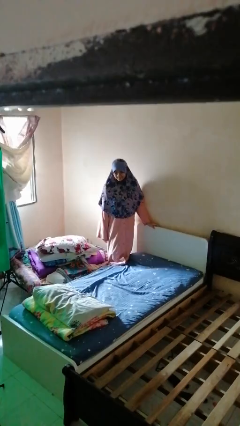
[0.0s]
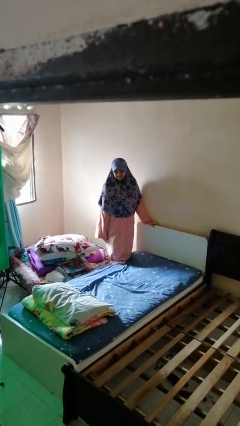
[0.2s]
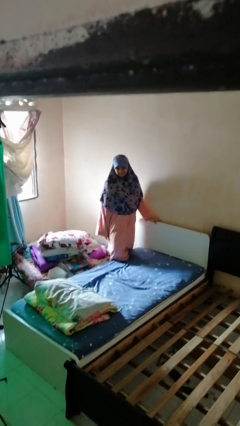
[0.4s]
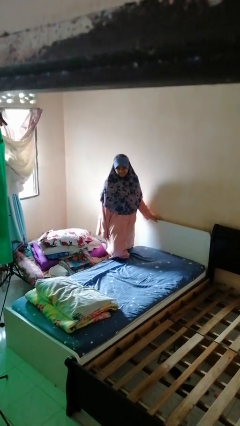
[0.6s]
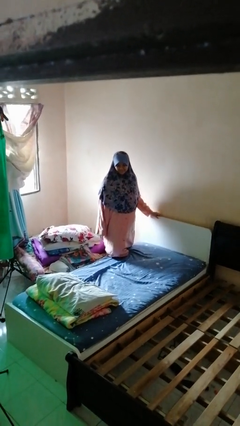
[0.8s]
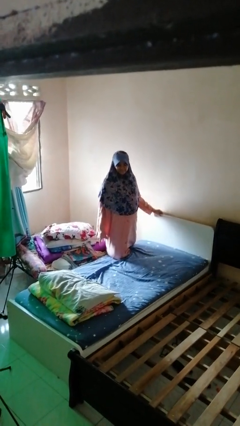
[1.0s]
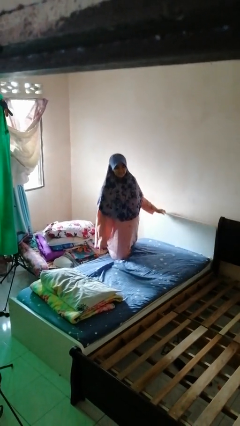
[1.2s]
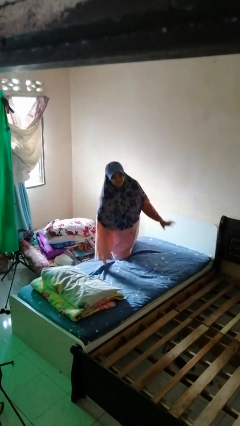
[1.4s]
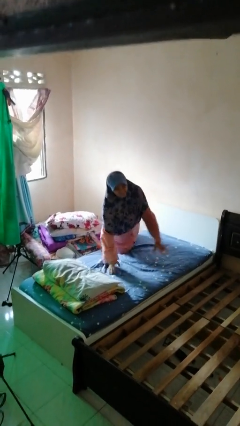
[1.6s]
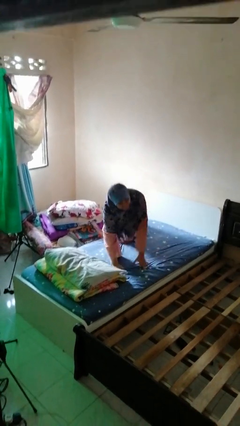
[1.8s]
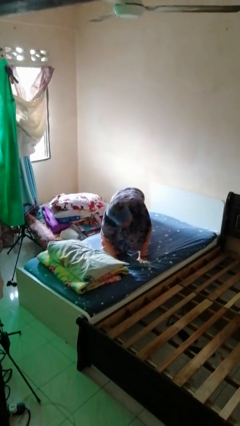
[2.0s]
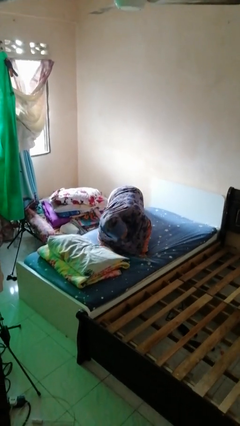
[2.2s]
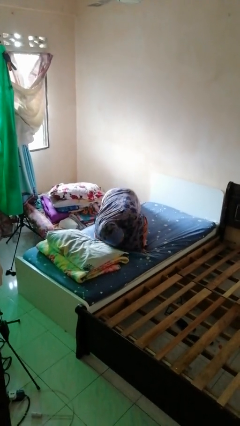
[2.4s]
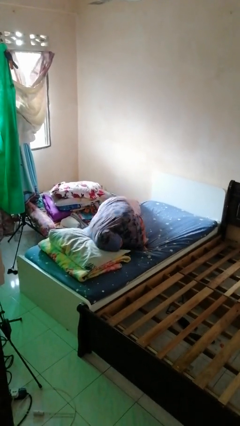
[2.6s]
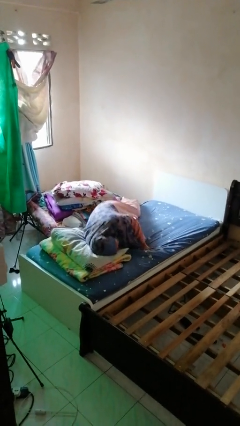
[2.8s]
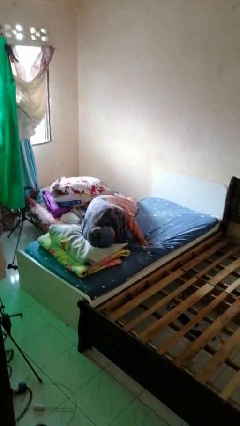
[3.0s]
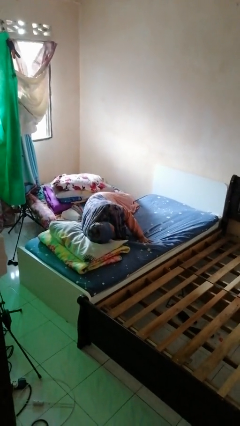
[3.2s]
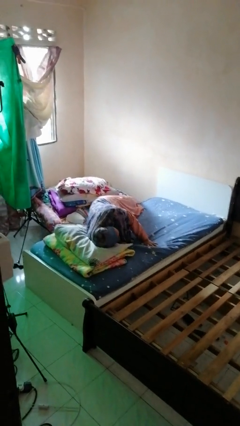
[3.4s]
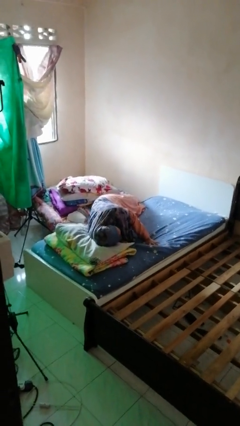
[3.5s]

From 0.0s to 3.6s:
person lies down on bed

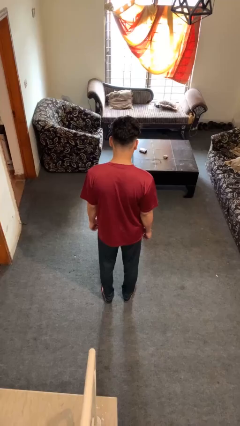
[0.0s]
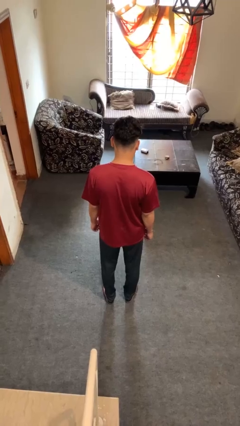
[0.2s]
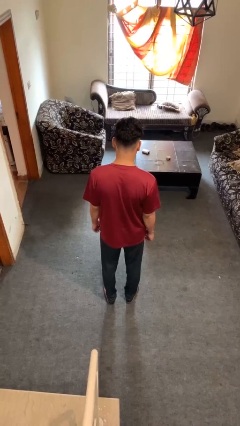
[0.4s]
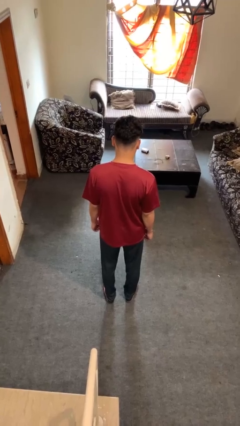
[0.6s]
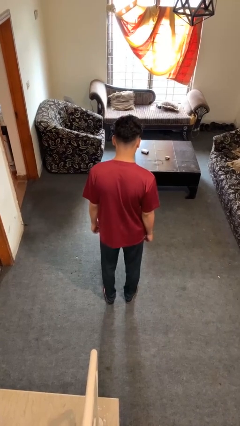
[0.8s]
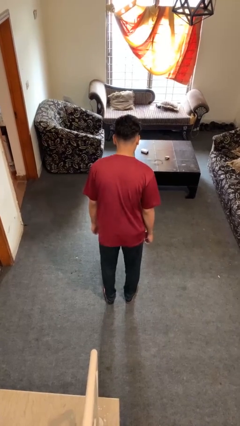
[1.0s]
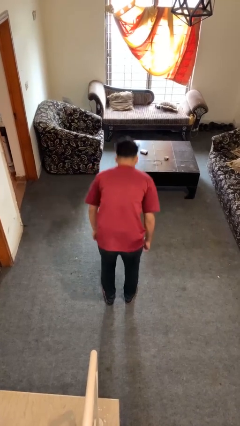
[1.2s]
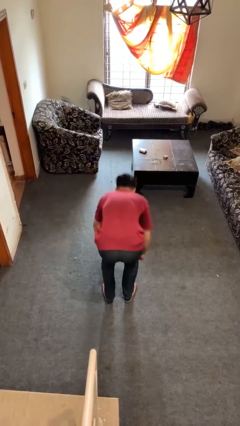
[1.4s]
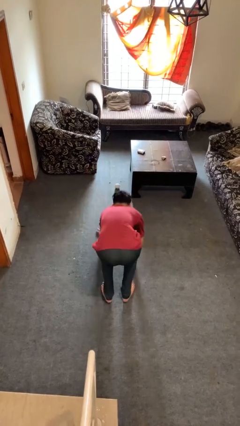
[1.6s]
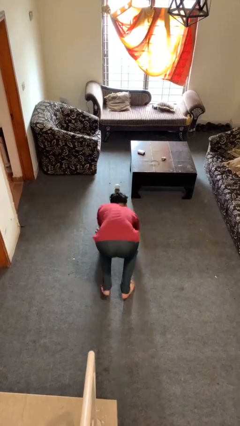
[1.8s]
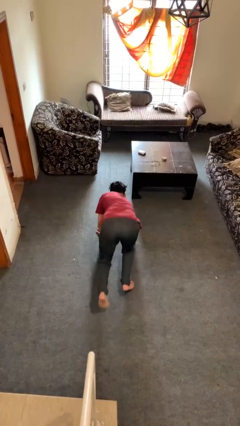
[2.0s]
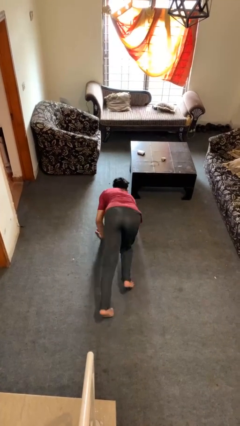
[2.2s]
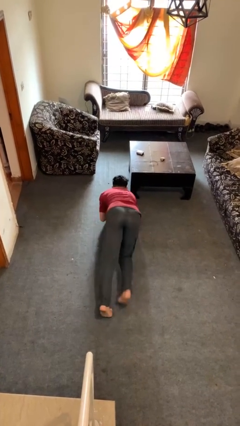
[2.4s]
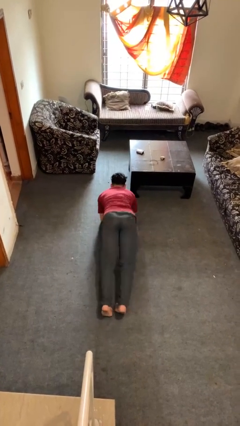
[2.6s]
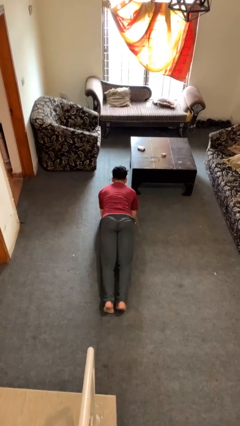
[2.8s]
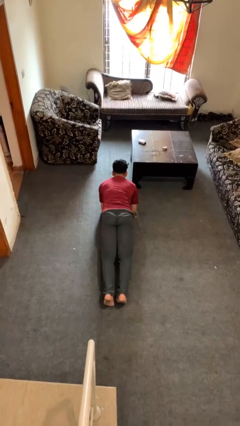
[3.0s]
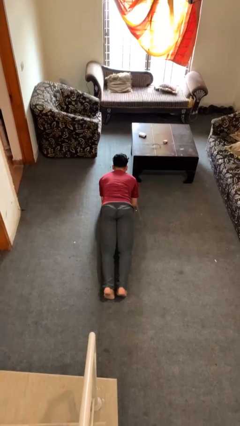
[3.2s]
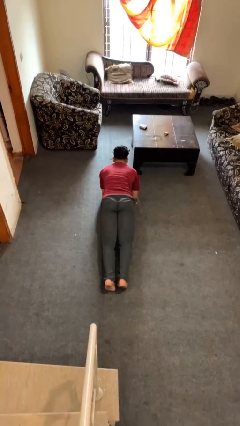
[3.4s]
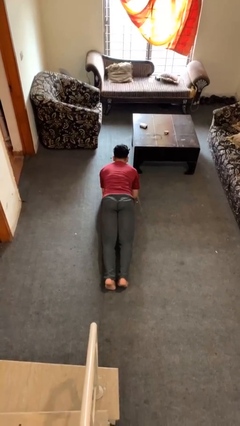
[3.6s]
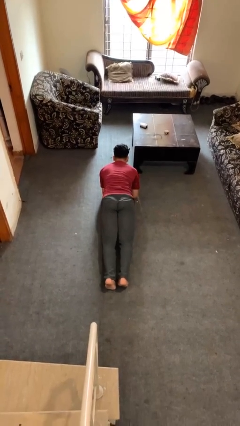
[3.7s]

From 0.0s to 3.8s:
person exercises with plank

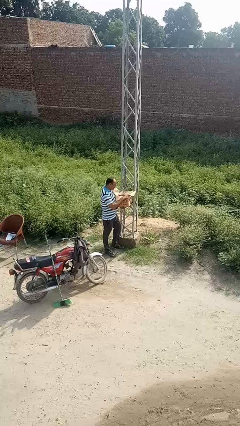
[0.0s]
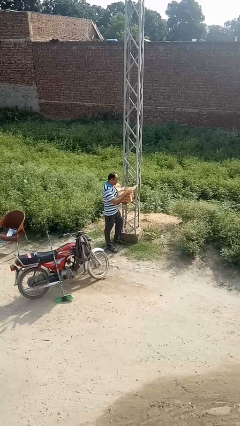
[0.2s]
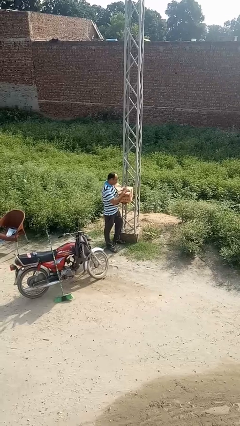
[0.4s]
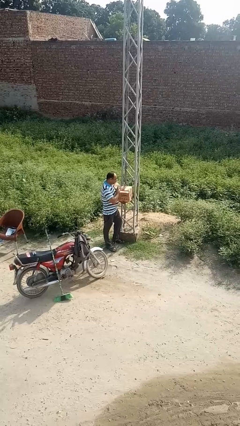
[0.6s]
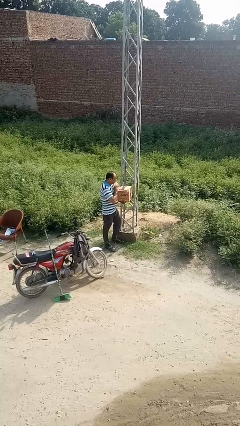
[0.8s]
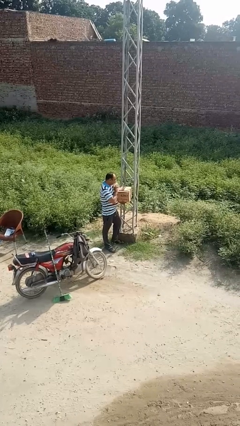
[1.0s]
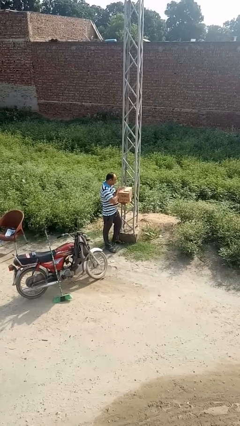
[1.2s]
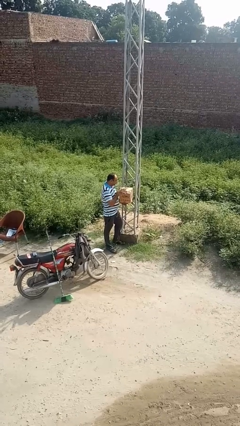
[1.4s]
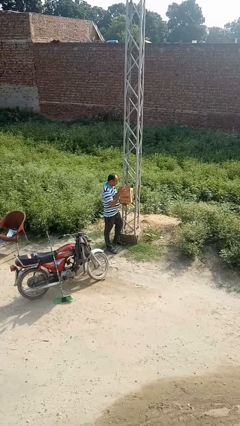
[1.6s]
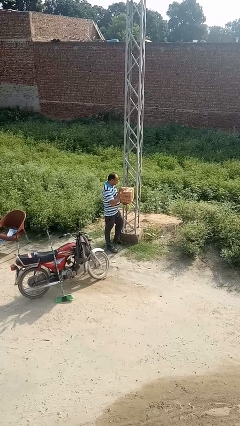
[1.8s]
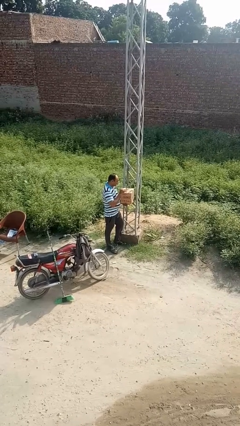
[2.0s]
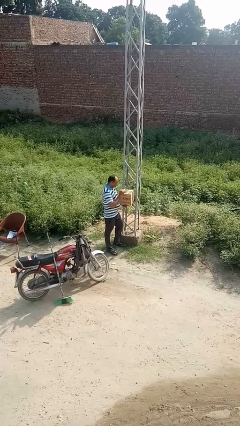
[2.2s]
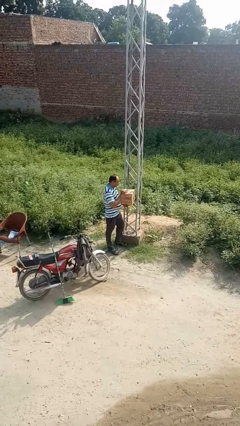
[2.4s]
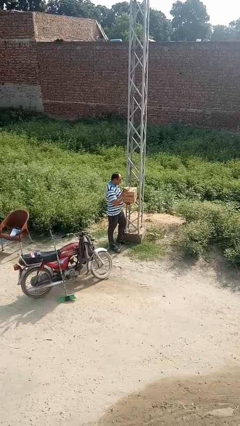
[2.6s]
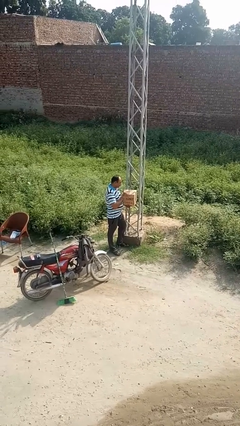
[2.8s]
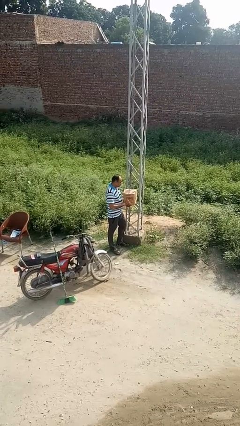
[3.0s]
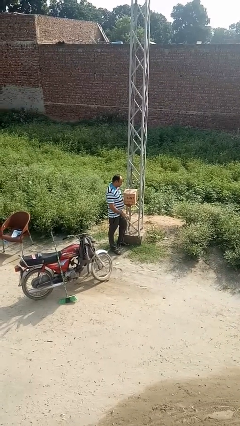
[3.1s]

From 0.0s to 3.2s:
person closes mailbox

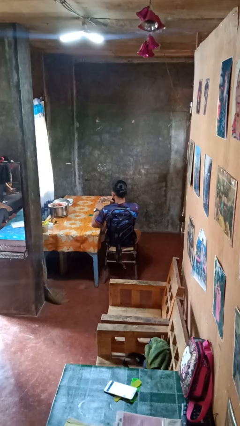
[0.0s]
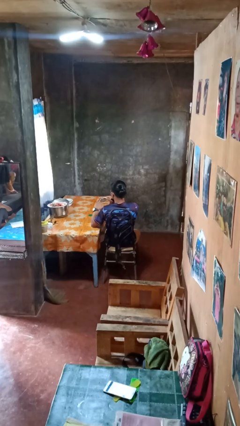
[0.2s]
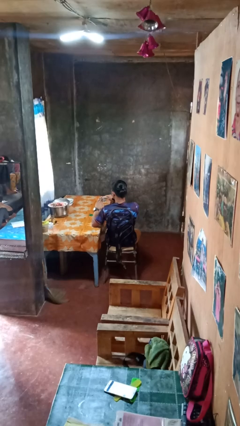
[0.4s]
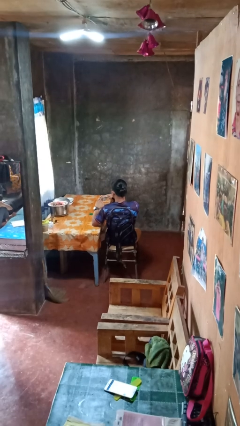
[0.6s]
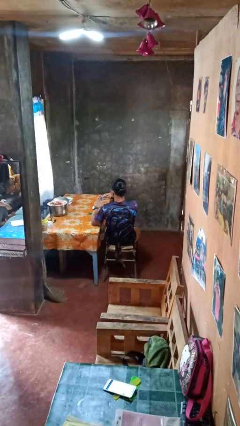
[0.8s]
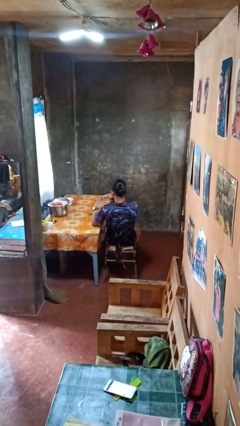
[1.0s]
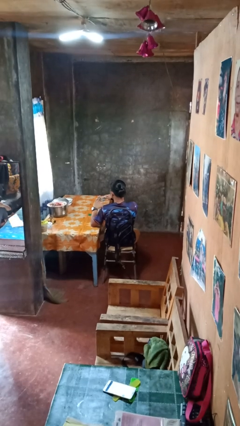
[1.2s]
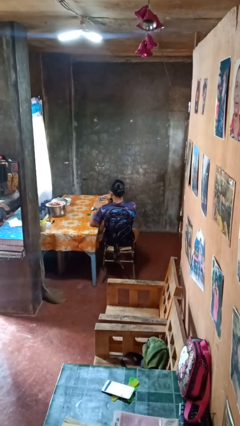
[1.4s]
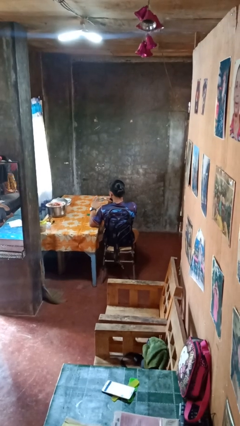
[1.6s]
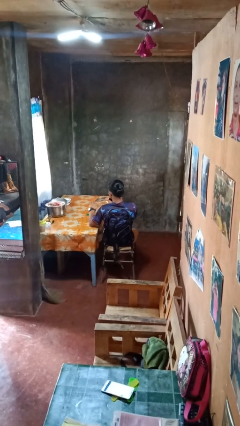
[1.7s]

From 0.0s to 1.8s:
person files fingernails

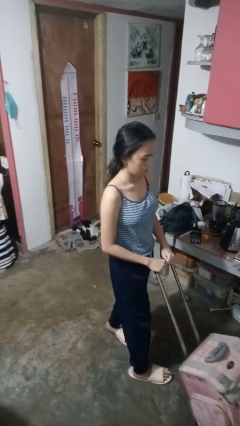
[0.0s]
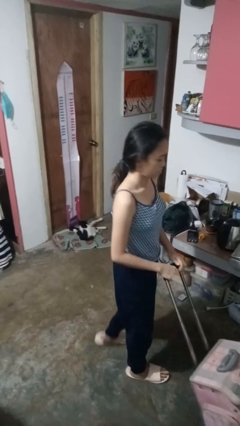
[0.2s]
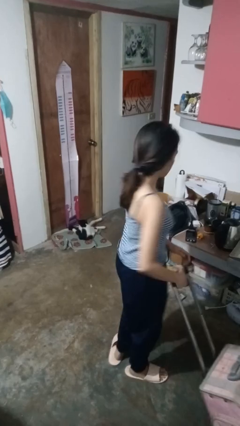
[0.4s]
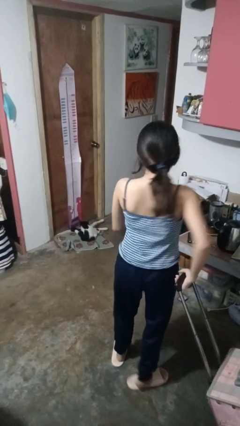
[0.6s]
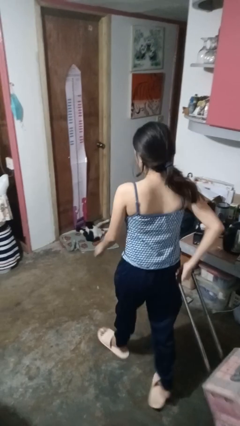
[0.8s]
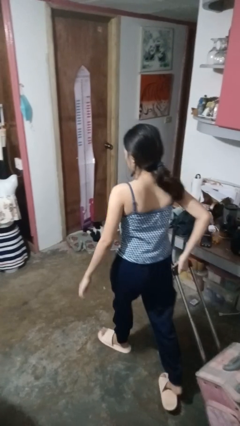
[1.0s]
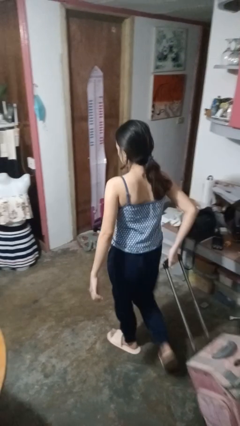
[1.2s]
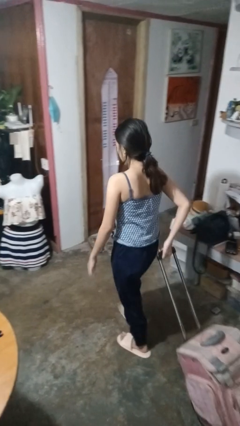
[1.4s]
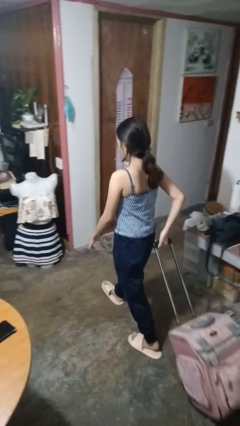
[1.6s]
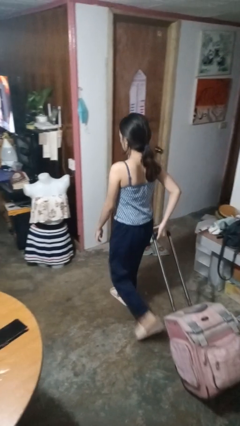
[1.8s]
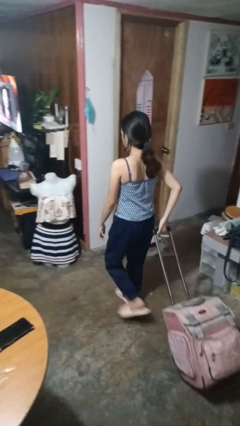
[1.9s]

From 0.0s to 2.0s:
person pulls wheeled cart

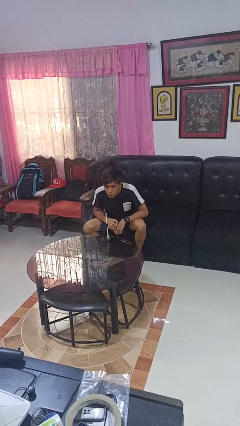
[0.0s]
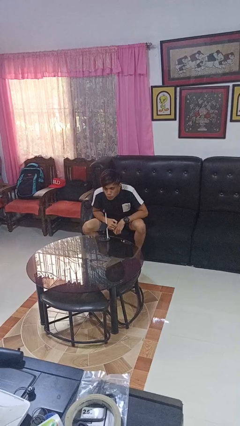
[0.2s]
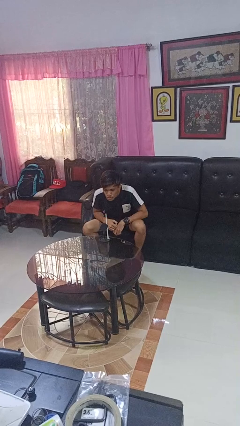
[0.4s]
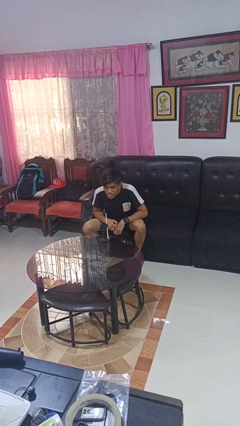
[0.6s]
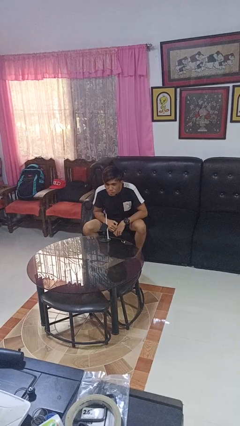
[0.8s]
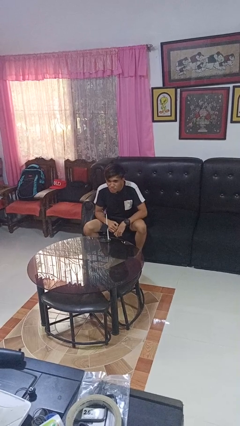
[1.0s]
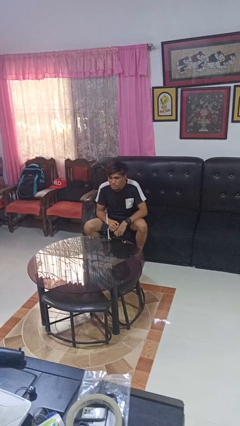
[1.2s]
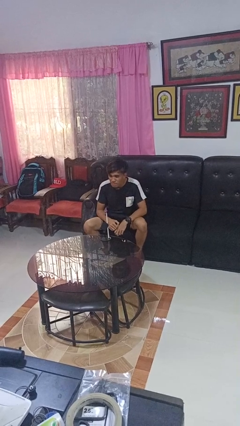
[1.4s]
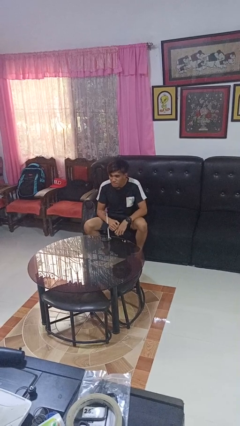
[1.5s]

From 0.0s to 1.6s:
person extinguishes candle

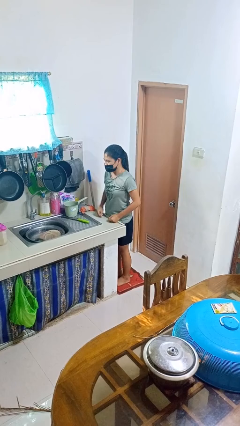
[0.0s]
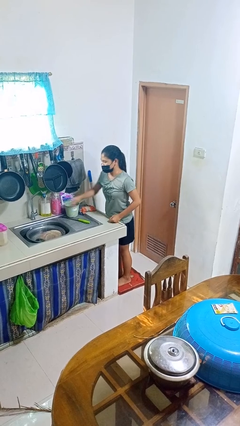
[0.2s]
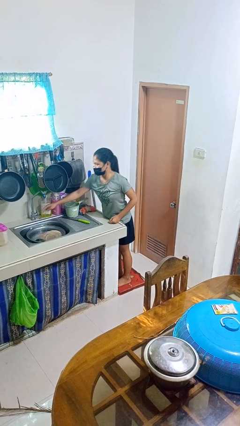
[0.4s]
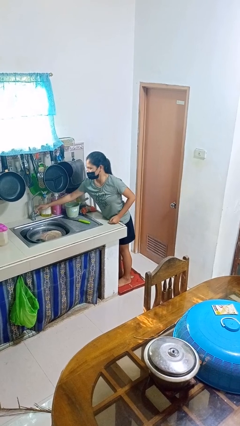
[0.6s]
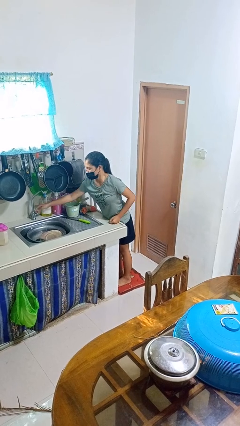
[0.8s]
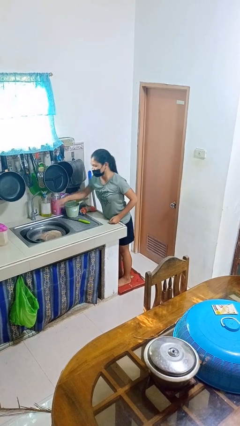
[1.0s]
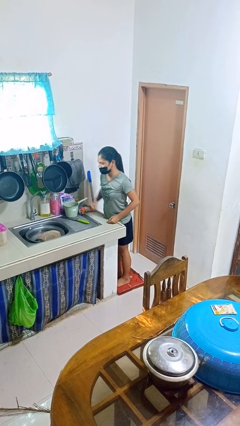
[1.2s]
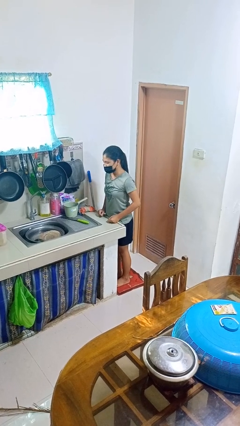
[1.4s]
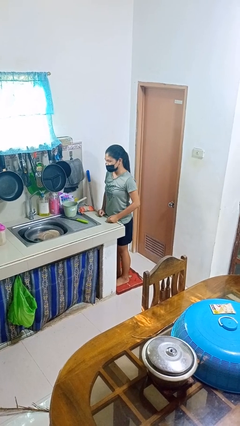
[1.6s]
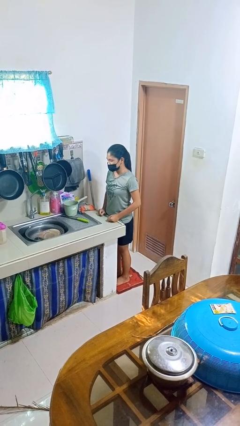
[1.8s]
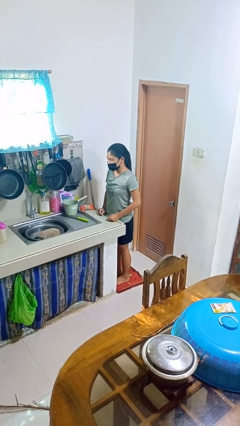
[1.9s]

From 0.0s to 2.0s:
person turns off faucet
